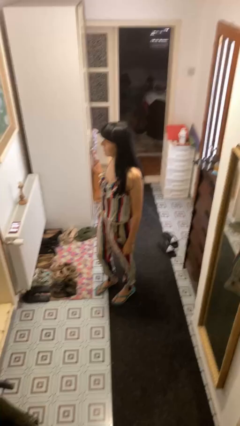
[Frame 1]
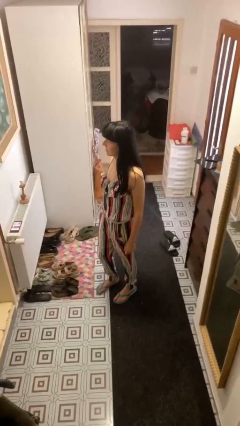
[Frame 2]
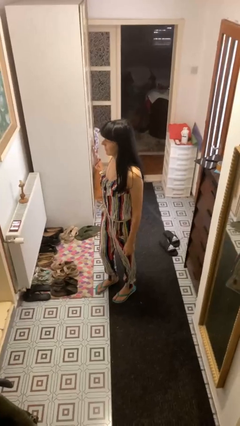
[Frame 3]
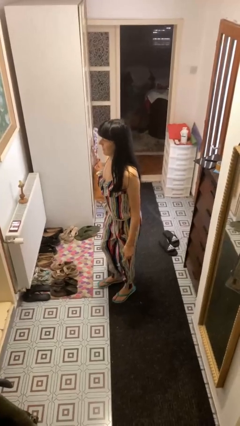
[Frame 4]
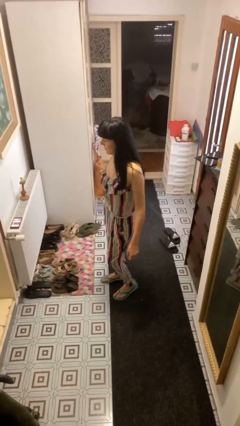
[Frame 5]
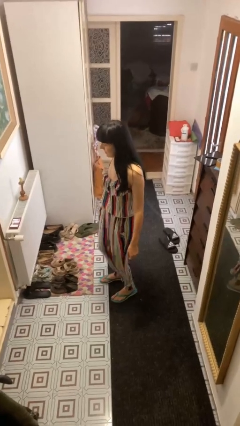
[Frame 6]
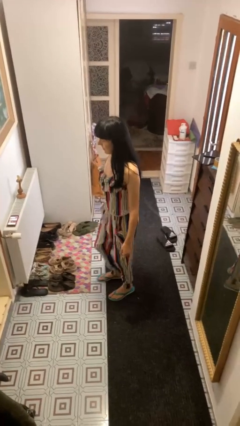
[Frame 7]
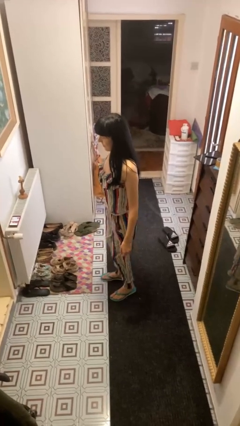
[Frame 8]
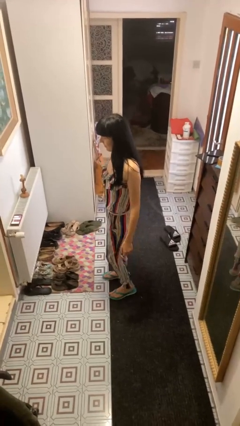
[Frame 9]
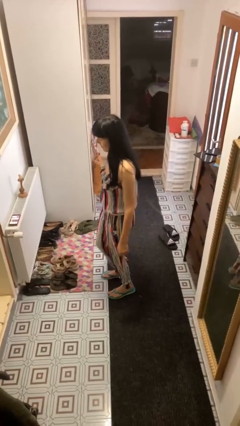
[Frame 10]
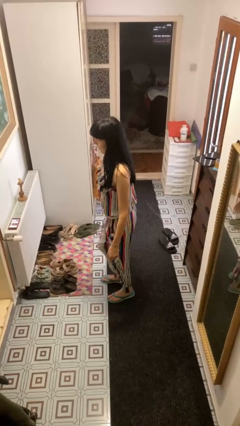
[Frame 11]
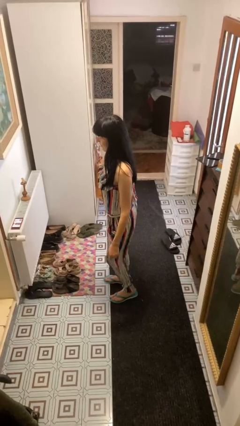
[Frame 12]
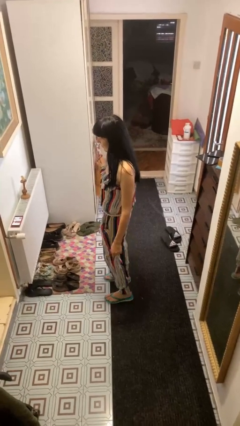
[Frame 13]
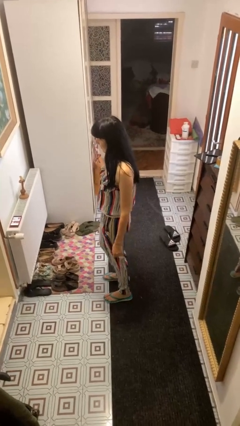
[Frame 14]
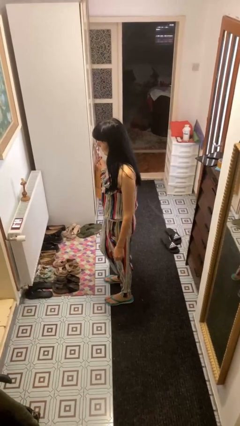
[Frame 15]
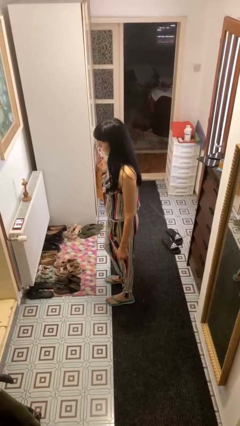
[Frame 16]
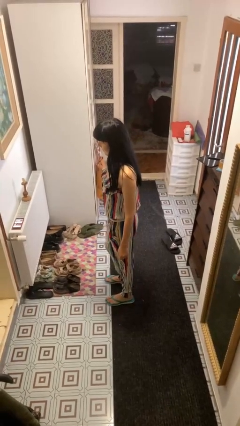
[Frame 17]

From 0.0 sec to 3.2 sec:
person wiggles hips

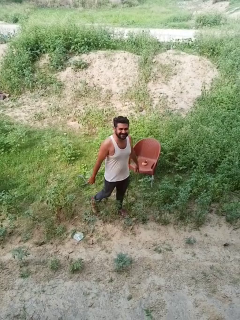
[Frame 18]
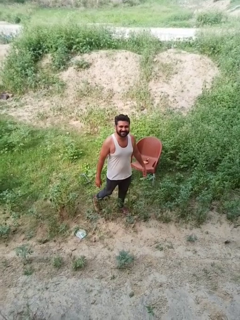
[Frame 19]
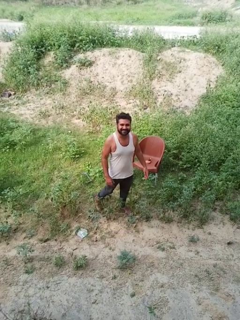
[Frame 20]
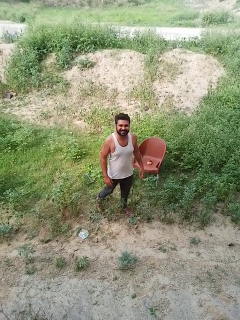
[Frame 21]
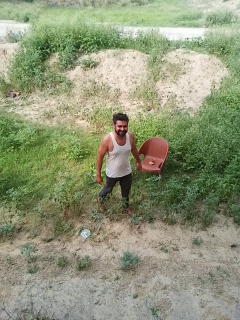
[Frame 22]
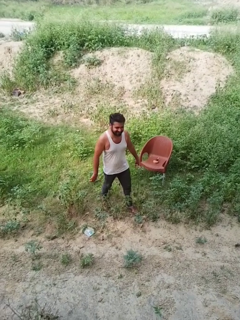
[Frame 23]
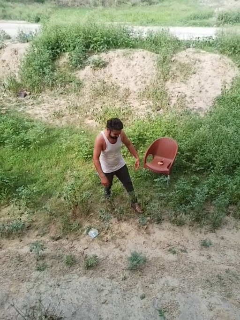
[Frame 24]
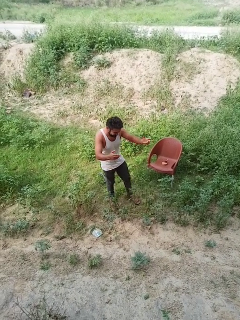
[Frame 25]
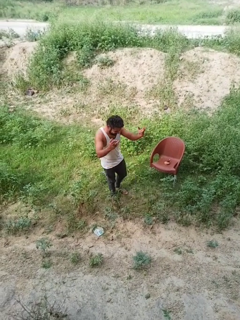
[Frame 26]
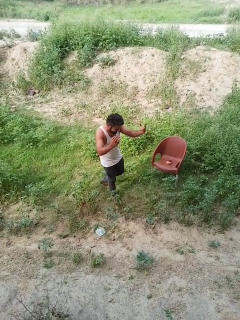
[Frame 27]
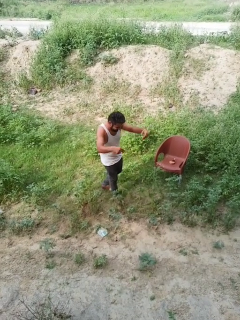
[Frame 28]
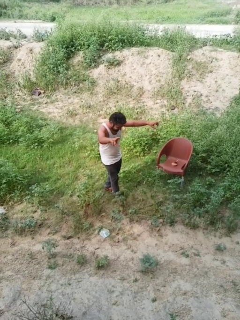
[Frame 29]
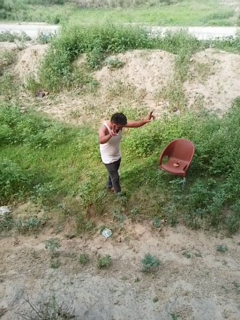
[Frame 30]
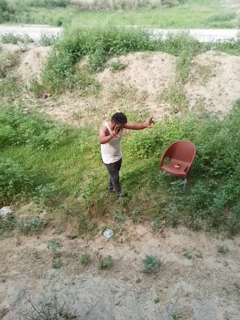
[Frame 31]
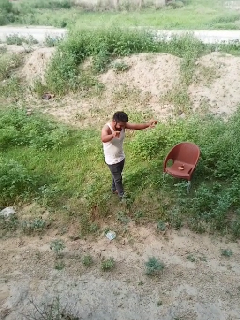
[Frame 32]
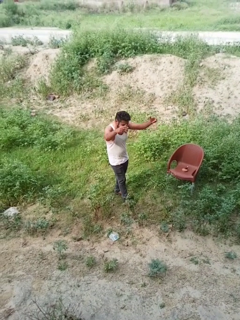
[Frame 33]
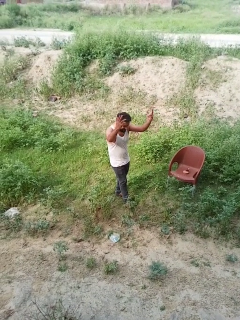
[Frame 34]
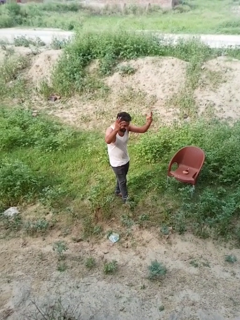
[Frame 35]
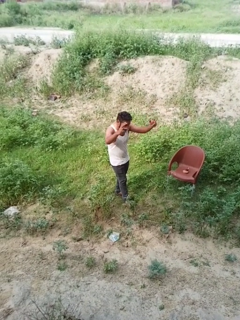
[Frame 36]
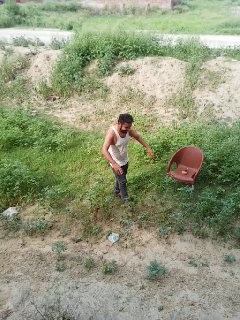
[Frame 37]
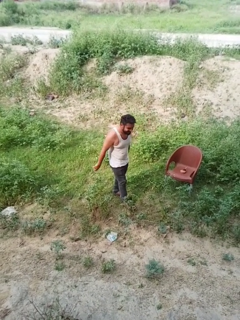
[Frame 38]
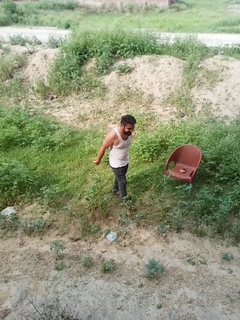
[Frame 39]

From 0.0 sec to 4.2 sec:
person dances in place

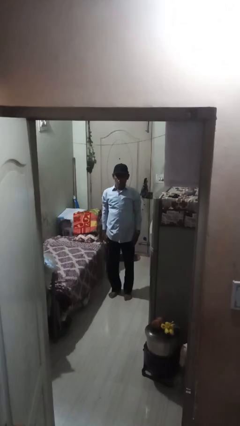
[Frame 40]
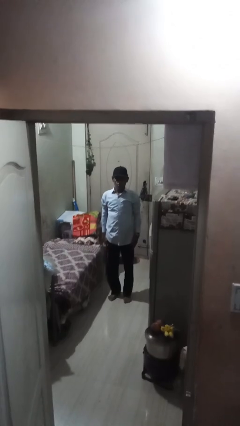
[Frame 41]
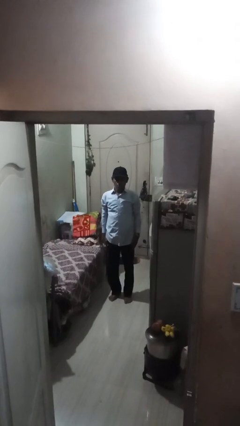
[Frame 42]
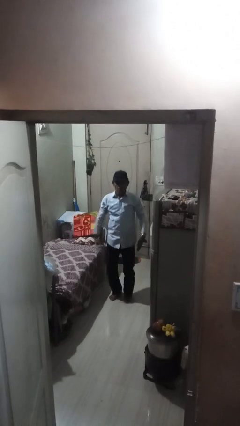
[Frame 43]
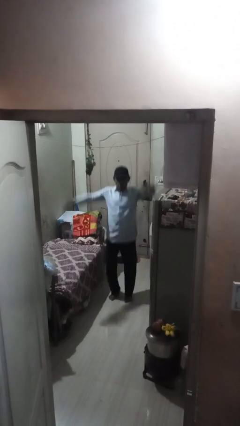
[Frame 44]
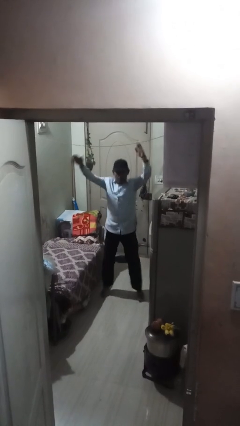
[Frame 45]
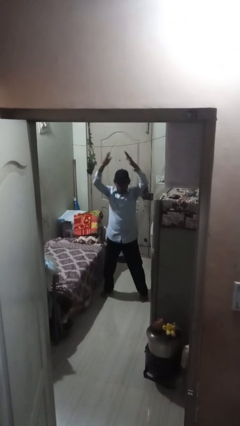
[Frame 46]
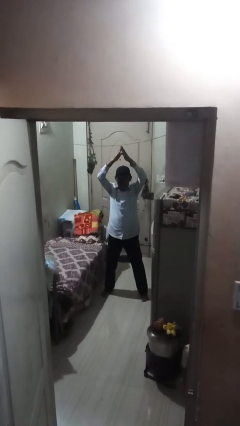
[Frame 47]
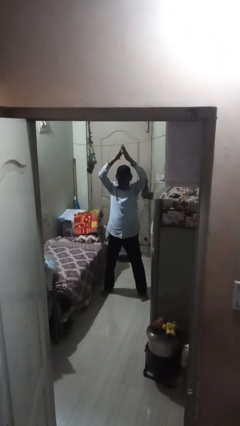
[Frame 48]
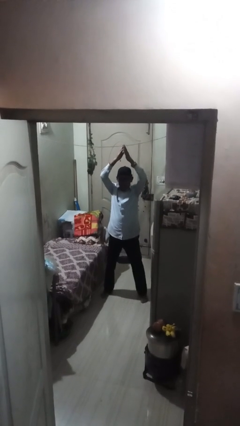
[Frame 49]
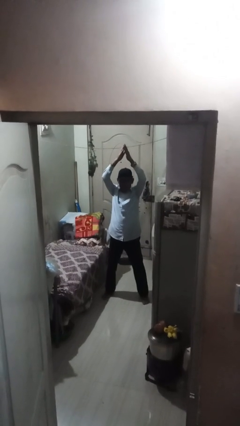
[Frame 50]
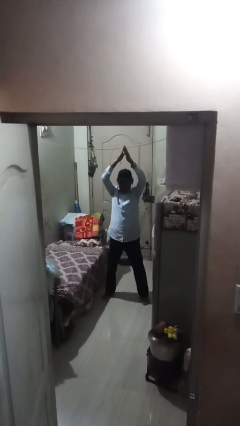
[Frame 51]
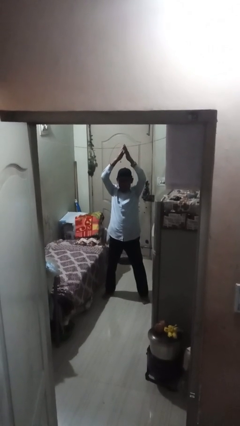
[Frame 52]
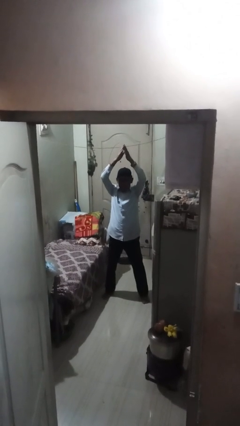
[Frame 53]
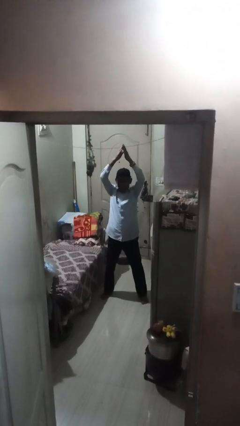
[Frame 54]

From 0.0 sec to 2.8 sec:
person exercises with jumping jacks

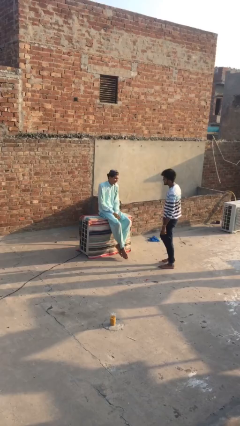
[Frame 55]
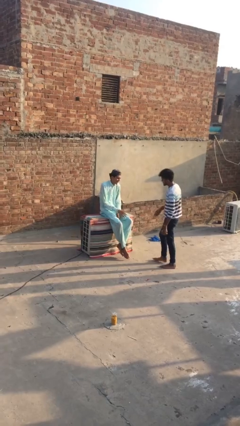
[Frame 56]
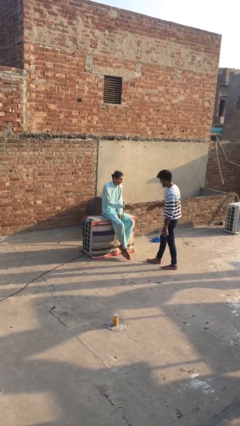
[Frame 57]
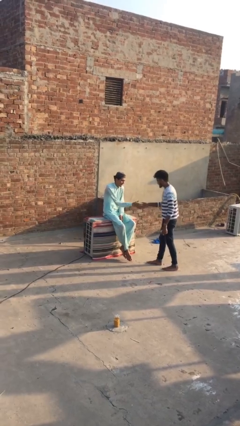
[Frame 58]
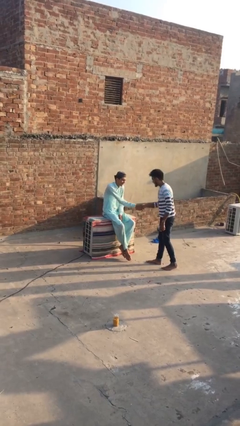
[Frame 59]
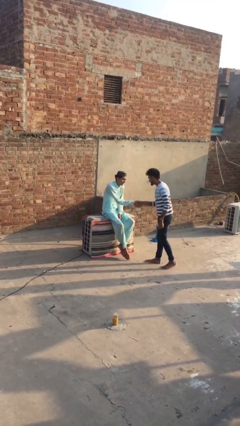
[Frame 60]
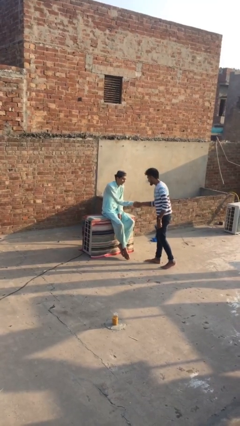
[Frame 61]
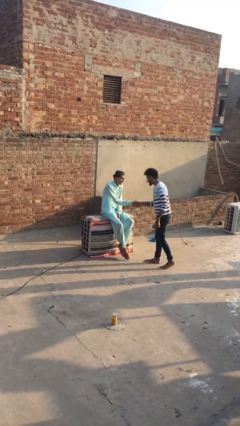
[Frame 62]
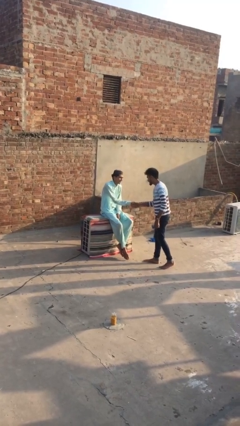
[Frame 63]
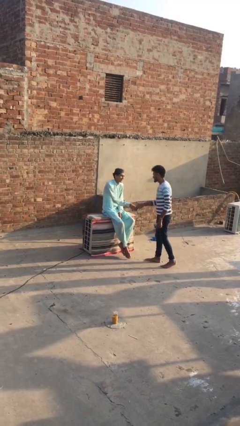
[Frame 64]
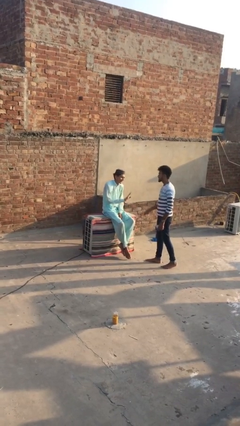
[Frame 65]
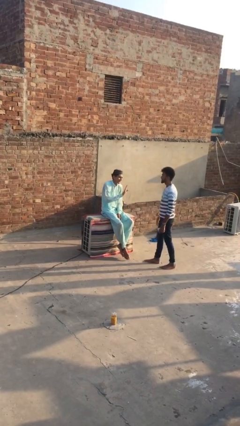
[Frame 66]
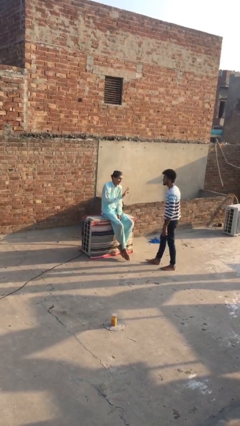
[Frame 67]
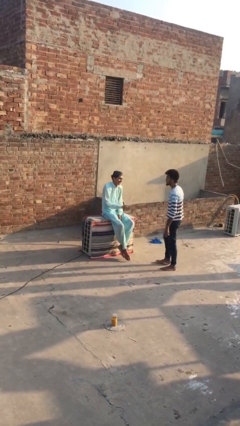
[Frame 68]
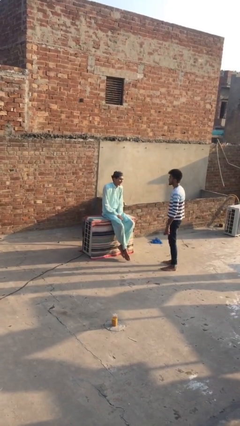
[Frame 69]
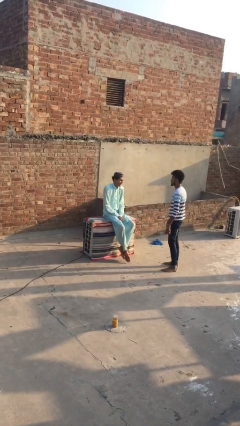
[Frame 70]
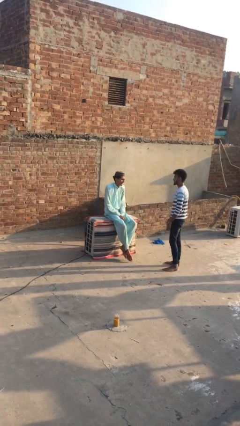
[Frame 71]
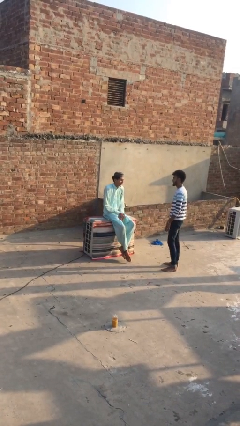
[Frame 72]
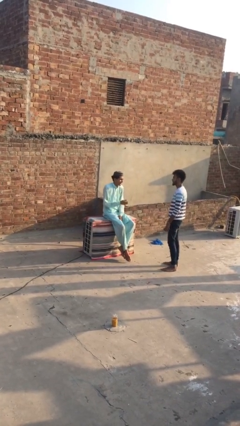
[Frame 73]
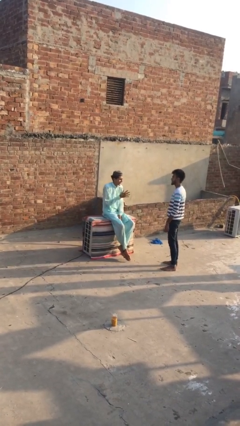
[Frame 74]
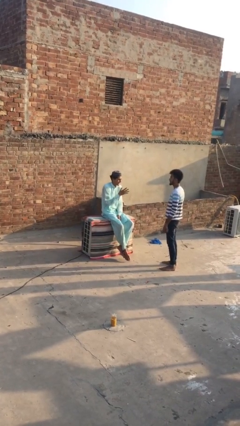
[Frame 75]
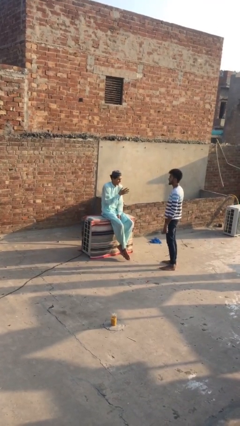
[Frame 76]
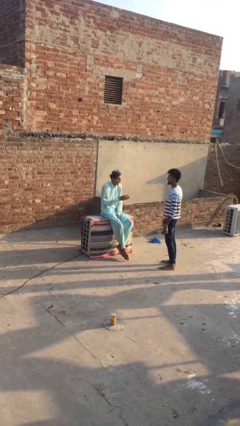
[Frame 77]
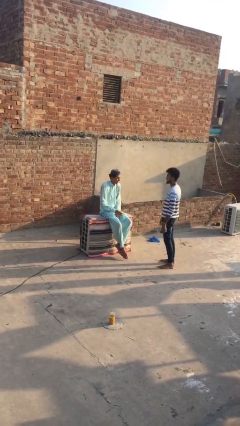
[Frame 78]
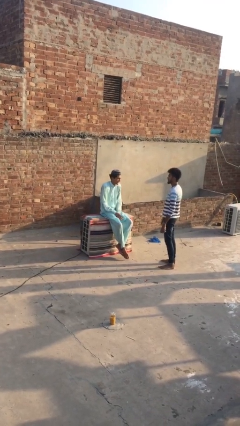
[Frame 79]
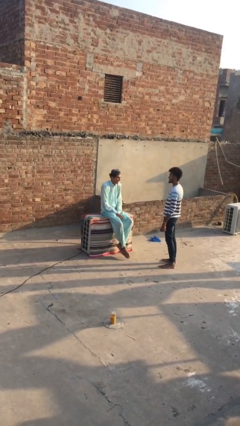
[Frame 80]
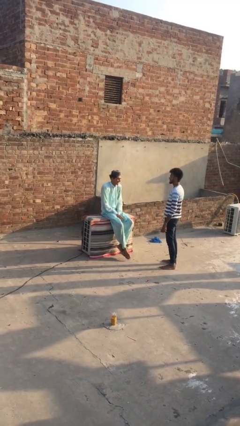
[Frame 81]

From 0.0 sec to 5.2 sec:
person shakes hand

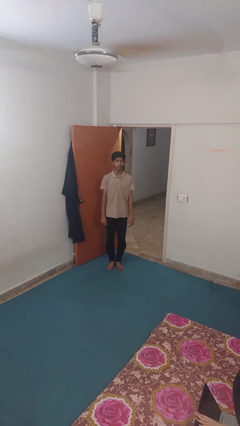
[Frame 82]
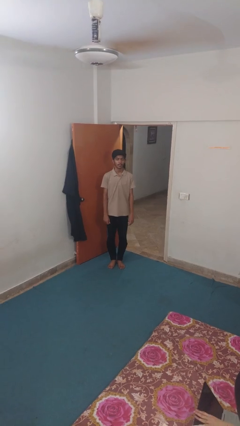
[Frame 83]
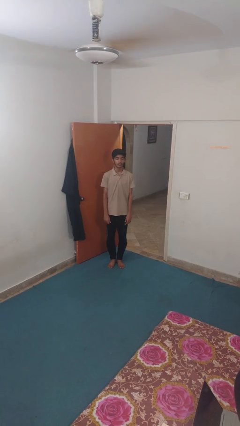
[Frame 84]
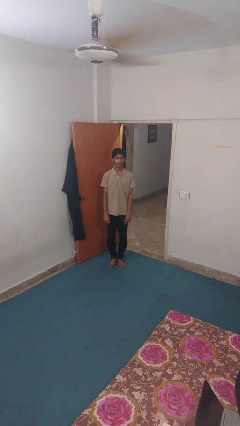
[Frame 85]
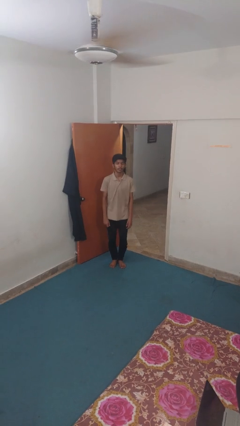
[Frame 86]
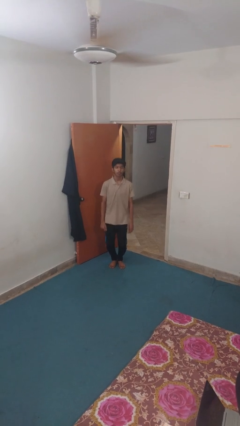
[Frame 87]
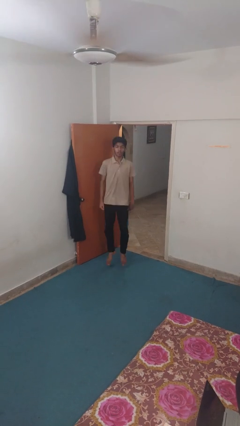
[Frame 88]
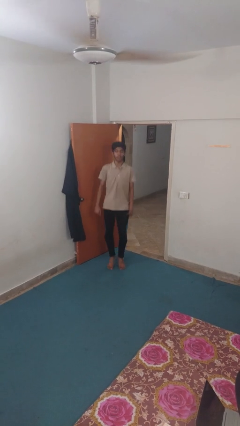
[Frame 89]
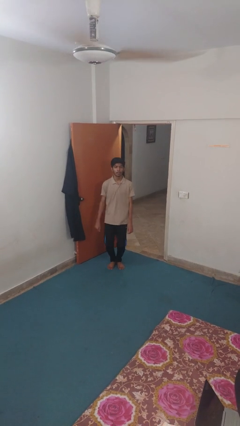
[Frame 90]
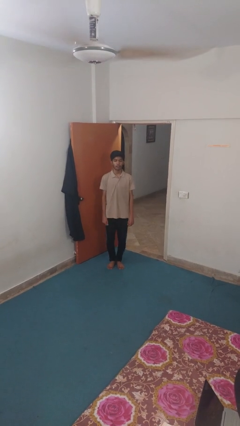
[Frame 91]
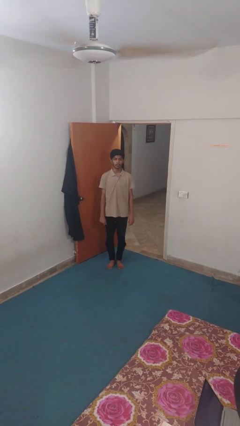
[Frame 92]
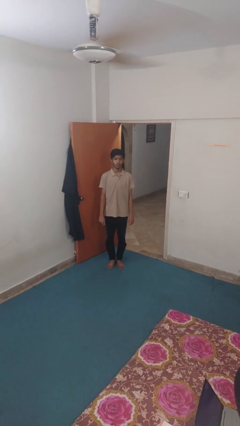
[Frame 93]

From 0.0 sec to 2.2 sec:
person jumps

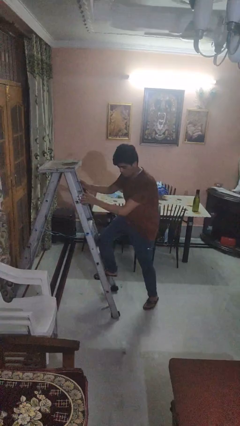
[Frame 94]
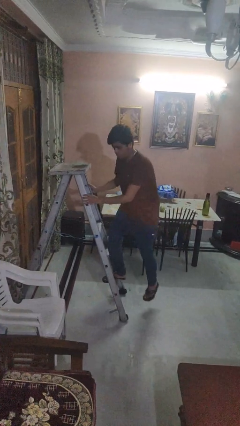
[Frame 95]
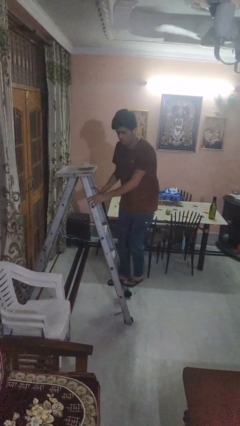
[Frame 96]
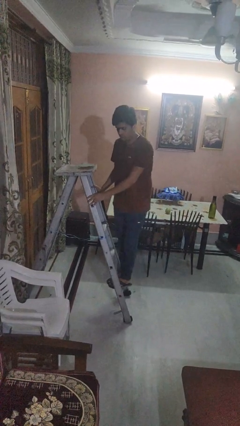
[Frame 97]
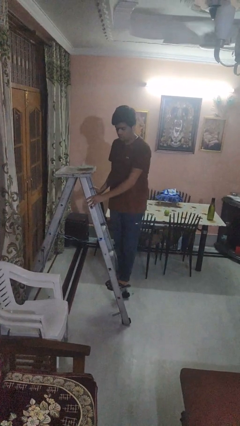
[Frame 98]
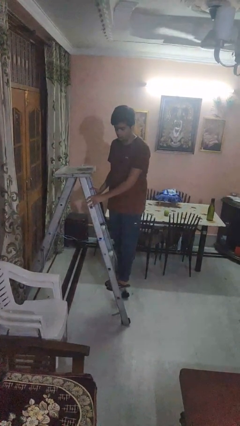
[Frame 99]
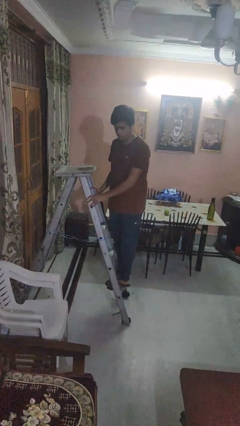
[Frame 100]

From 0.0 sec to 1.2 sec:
person climbs up ladder
